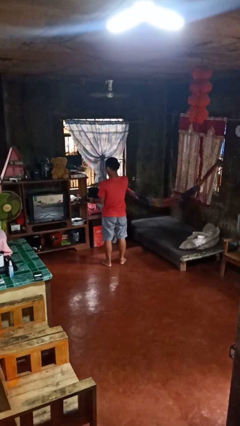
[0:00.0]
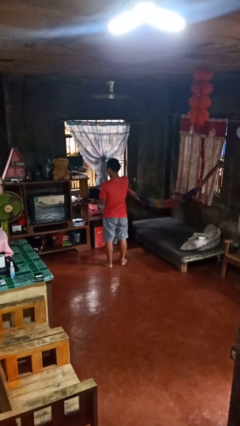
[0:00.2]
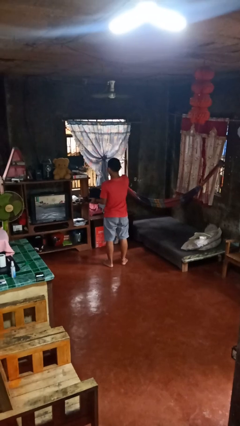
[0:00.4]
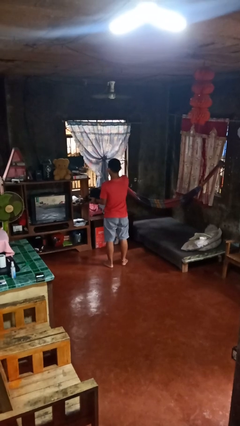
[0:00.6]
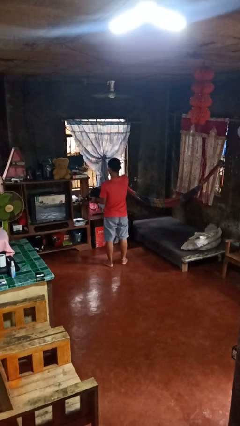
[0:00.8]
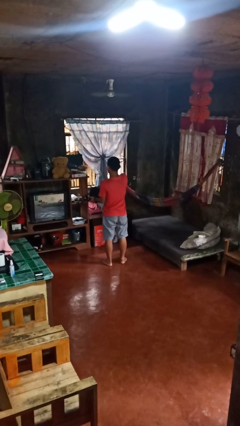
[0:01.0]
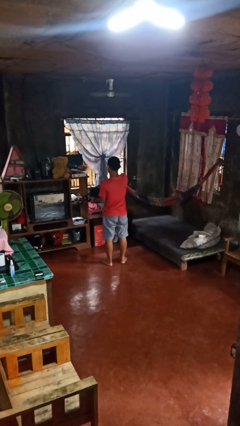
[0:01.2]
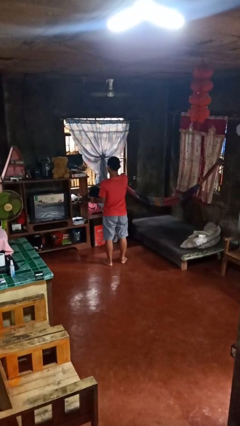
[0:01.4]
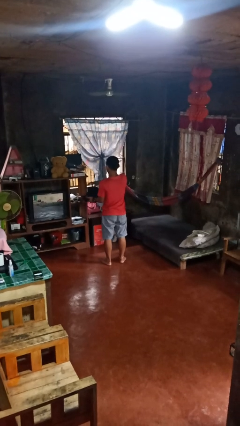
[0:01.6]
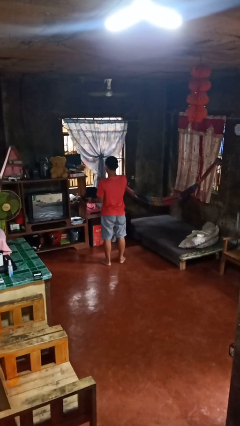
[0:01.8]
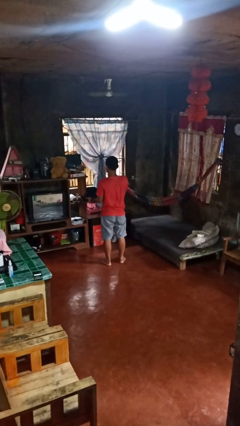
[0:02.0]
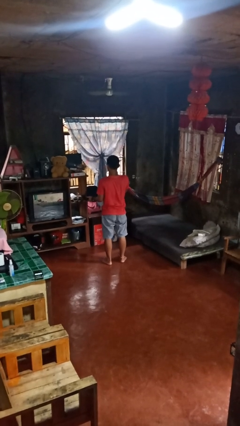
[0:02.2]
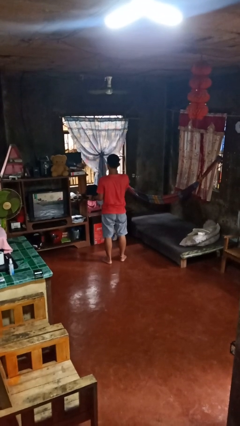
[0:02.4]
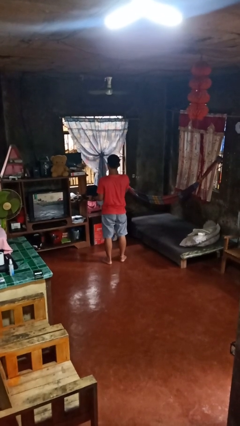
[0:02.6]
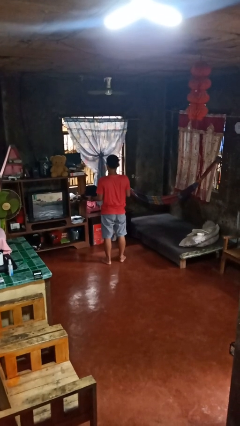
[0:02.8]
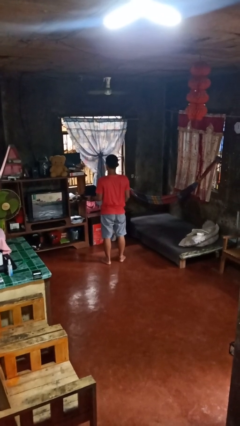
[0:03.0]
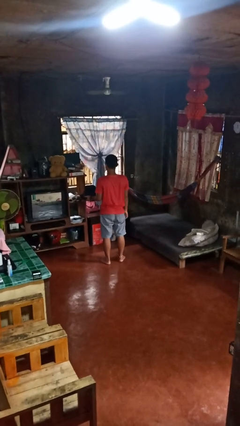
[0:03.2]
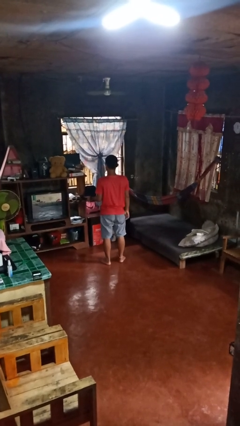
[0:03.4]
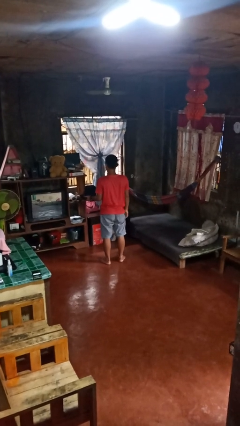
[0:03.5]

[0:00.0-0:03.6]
person eats snack from bag

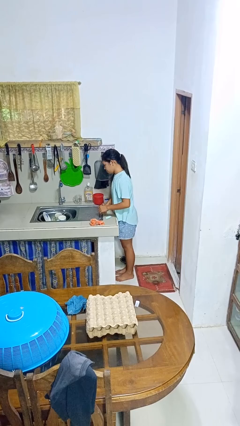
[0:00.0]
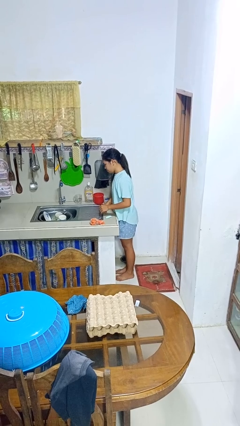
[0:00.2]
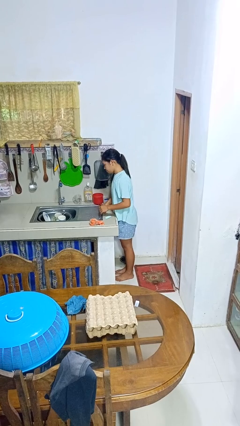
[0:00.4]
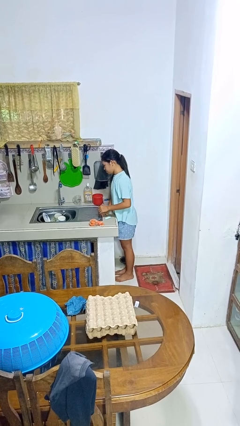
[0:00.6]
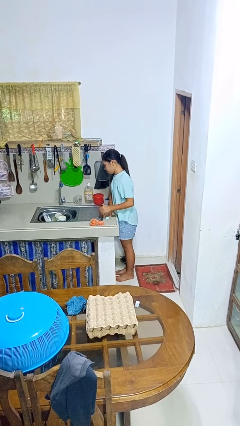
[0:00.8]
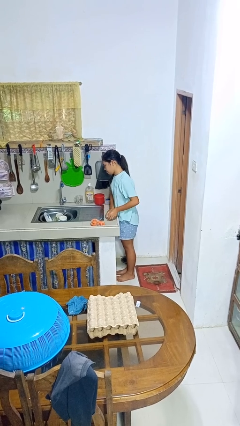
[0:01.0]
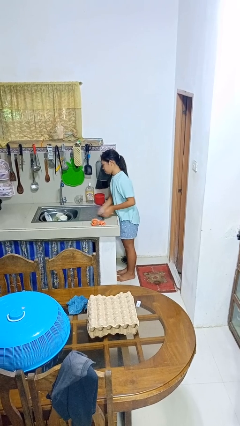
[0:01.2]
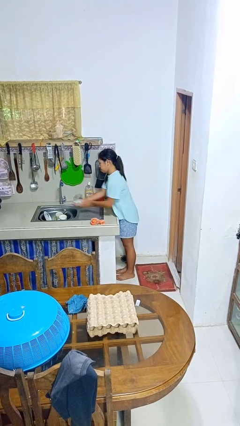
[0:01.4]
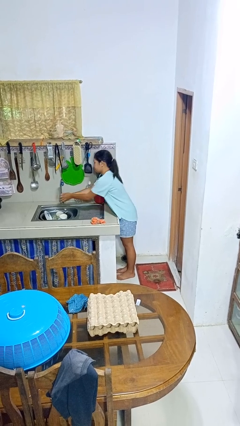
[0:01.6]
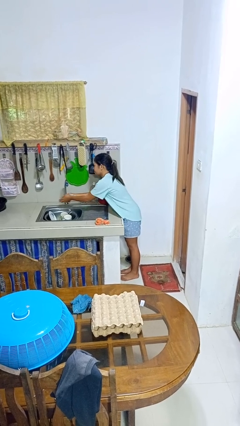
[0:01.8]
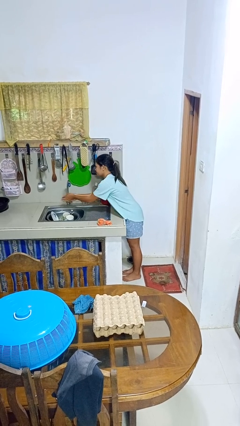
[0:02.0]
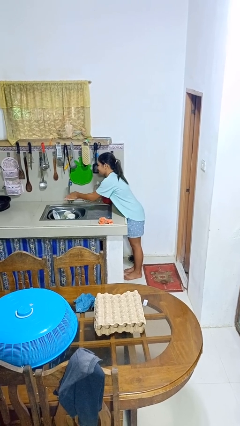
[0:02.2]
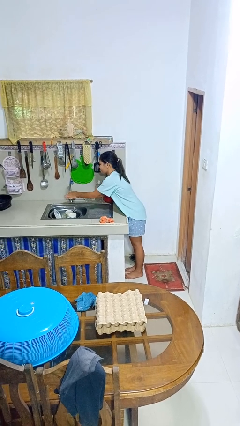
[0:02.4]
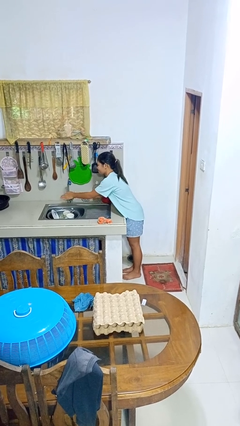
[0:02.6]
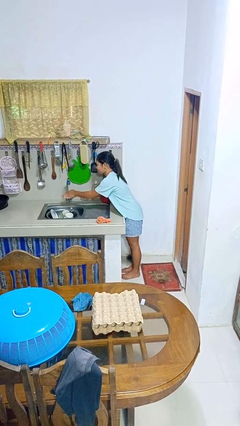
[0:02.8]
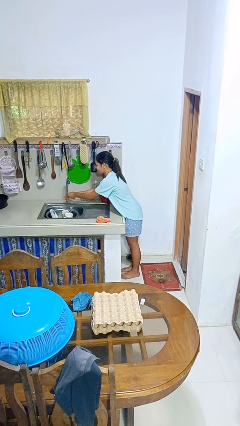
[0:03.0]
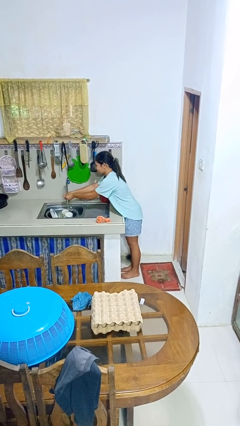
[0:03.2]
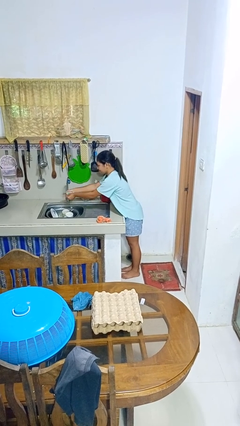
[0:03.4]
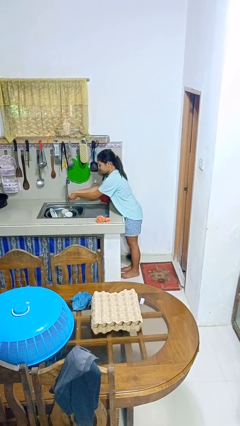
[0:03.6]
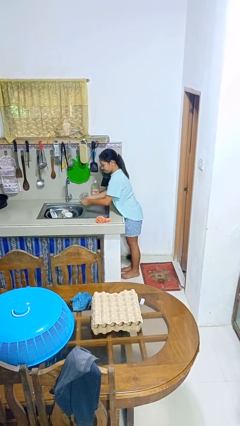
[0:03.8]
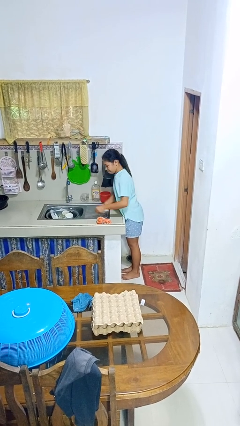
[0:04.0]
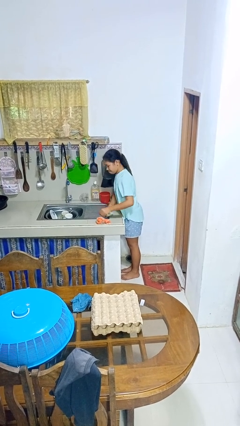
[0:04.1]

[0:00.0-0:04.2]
person washes hands

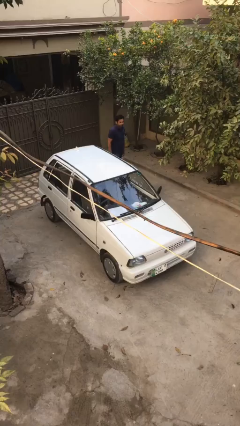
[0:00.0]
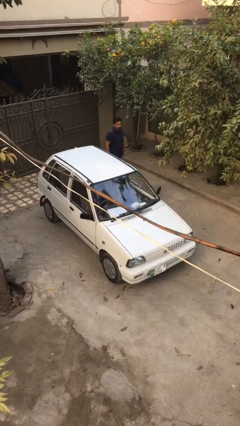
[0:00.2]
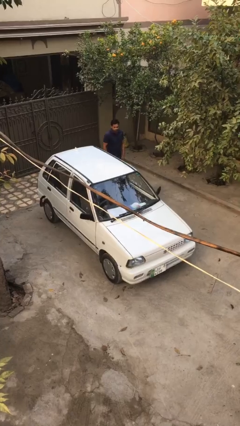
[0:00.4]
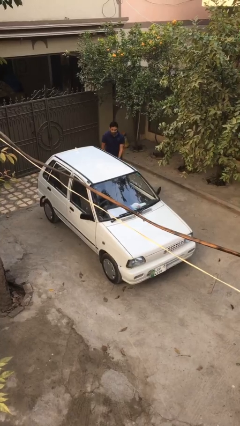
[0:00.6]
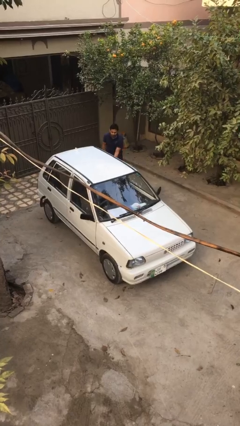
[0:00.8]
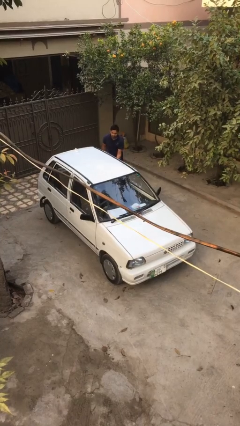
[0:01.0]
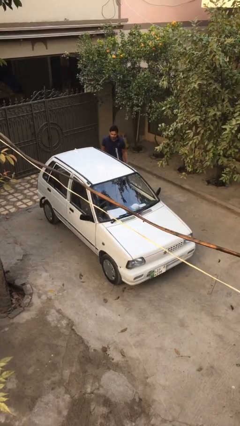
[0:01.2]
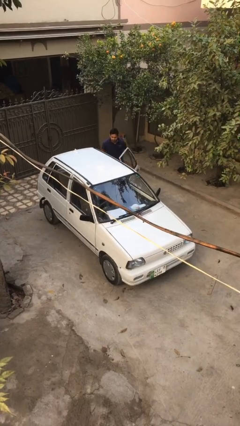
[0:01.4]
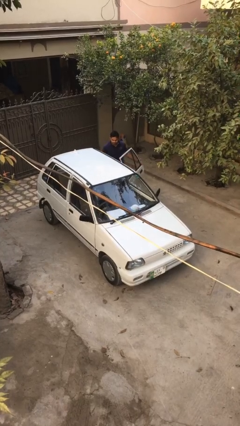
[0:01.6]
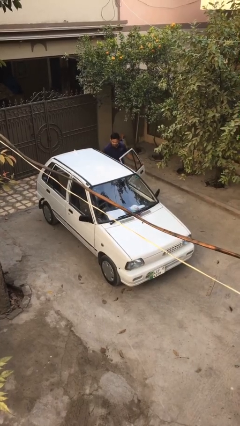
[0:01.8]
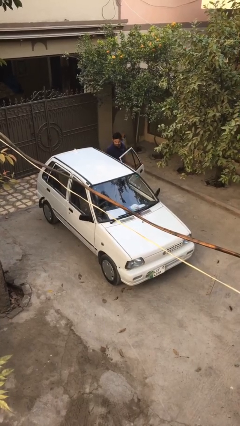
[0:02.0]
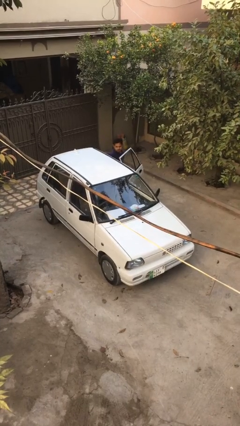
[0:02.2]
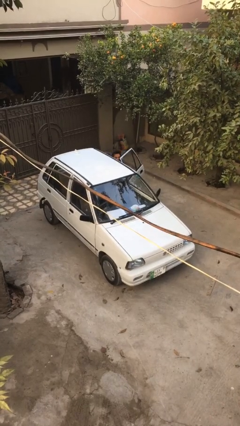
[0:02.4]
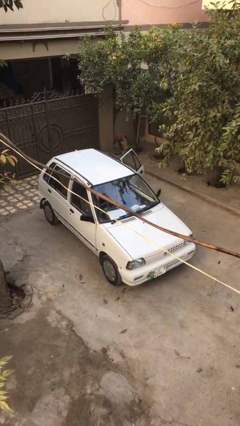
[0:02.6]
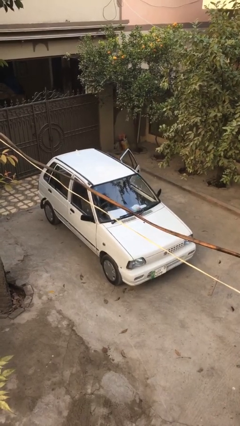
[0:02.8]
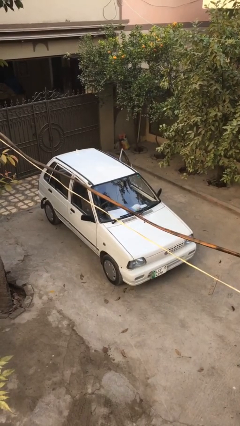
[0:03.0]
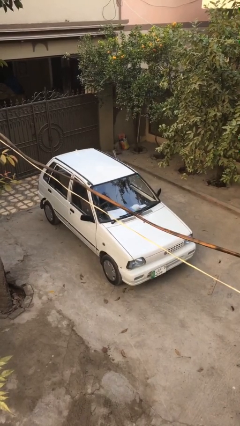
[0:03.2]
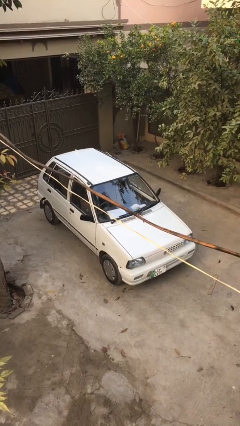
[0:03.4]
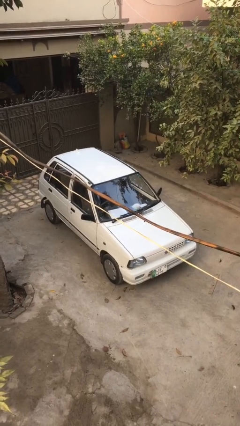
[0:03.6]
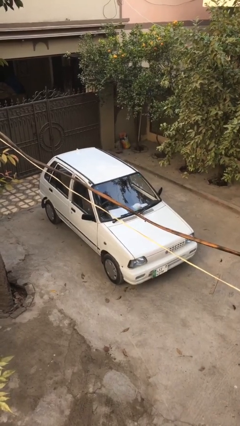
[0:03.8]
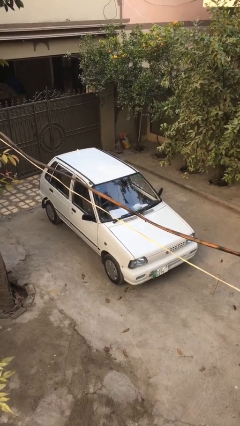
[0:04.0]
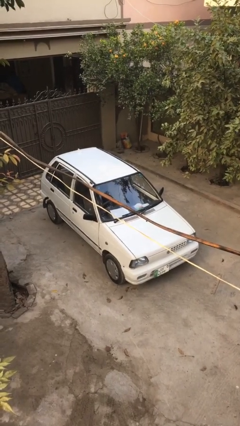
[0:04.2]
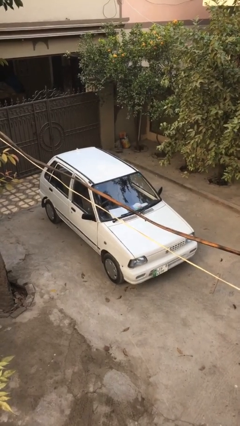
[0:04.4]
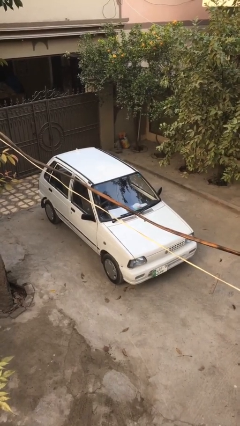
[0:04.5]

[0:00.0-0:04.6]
car picks up person

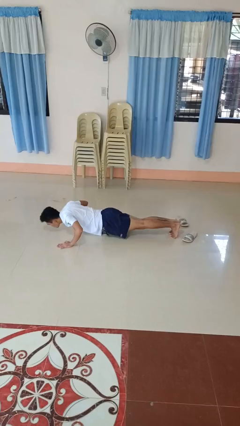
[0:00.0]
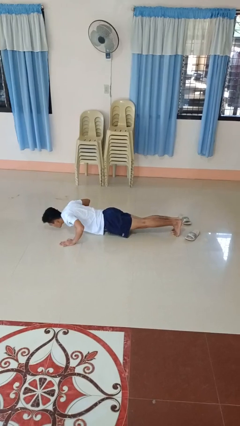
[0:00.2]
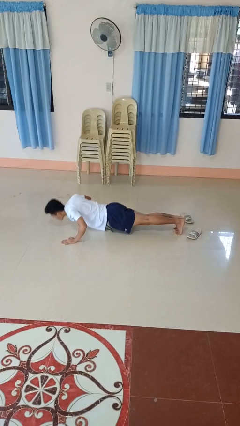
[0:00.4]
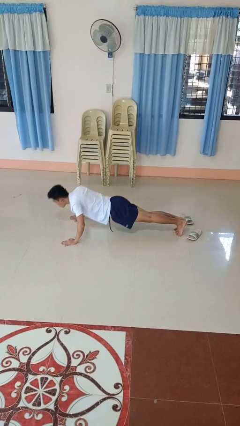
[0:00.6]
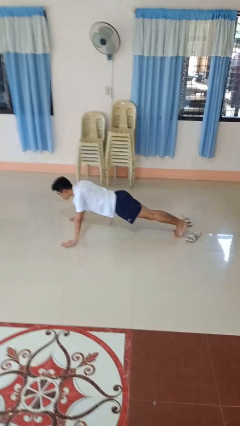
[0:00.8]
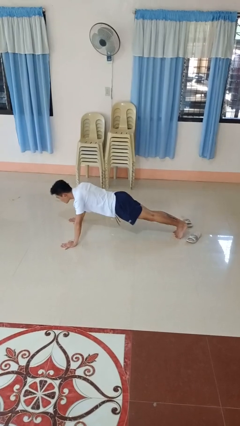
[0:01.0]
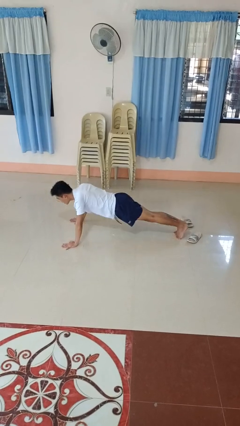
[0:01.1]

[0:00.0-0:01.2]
person exercises with pushup

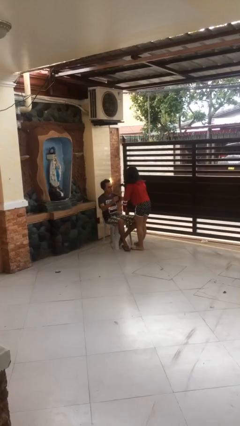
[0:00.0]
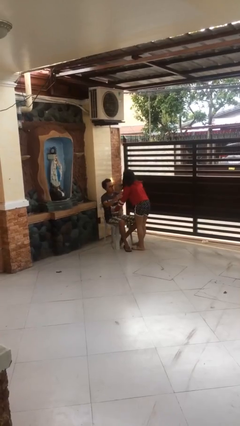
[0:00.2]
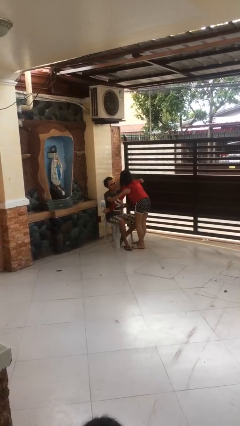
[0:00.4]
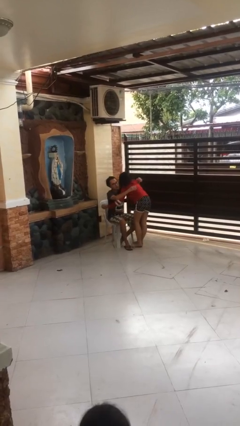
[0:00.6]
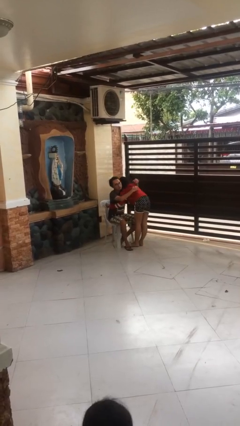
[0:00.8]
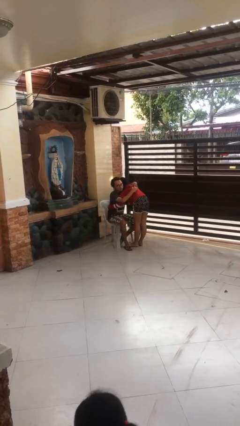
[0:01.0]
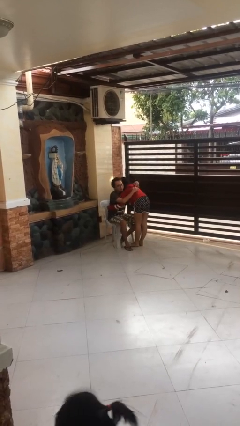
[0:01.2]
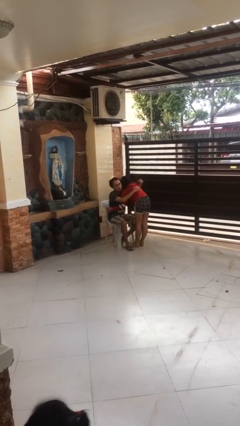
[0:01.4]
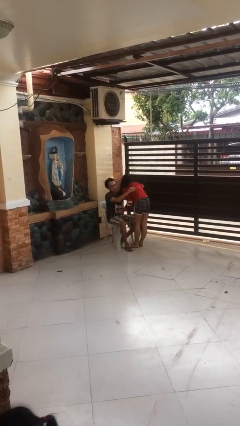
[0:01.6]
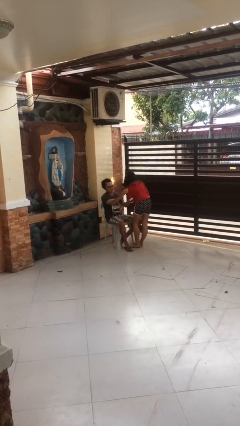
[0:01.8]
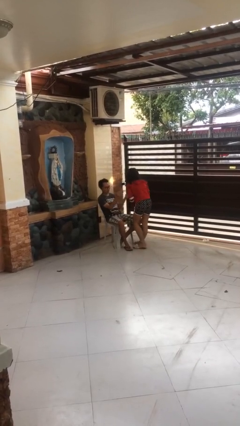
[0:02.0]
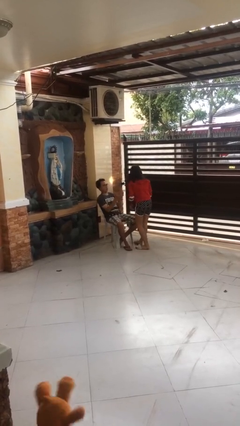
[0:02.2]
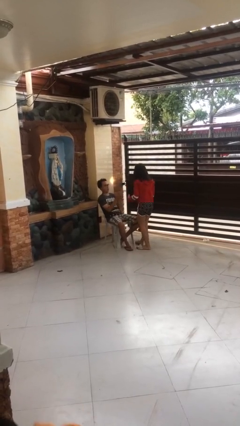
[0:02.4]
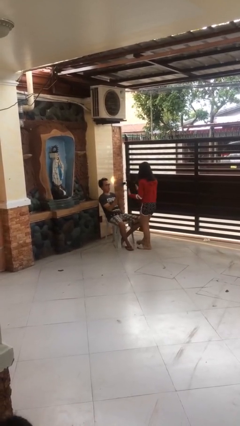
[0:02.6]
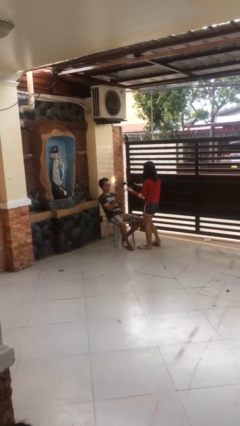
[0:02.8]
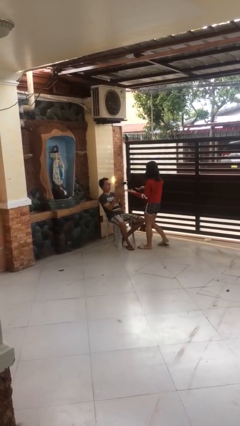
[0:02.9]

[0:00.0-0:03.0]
person embraces person

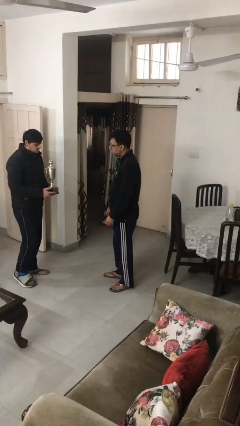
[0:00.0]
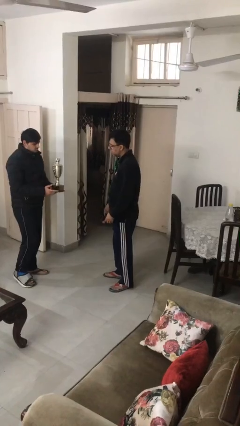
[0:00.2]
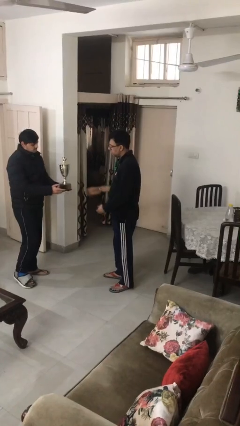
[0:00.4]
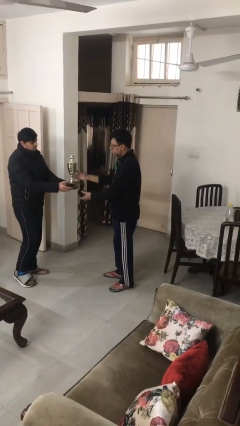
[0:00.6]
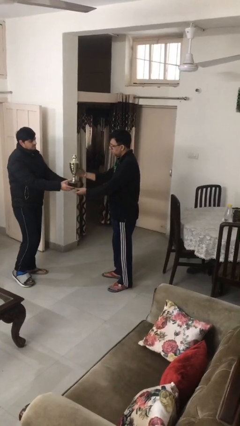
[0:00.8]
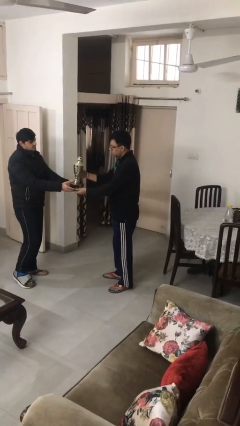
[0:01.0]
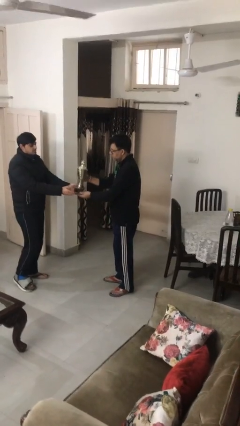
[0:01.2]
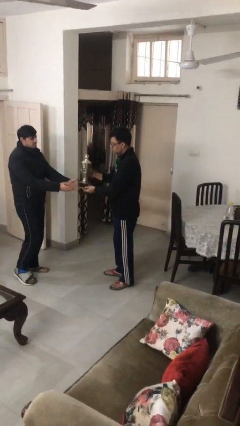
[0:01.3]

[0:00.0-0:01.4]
person transfers object to person

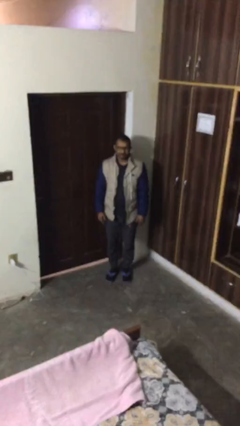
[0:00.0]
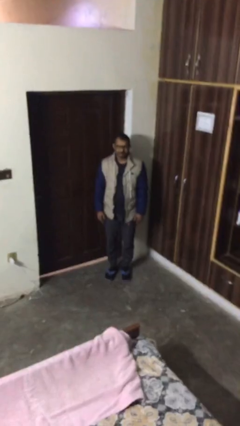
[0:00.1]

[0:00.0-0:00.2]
person sits down
